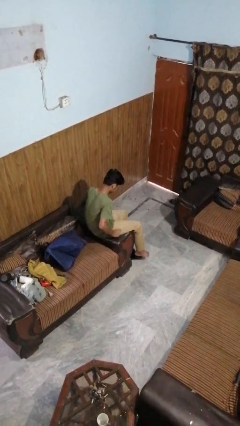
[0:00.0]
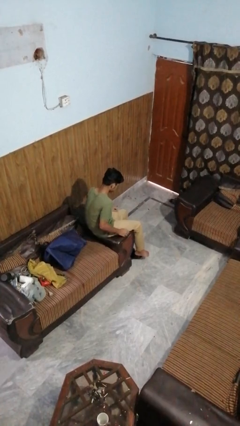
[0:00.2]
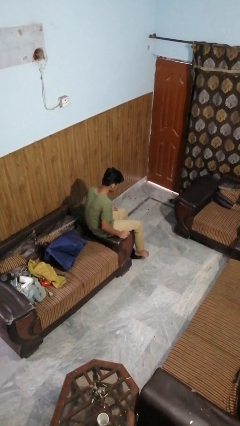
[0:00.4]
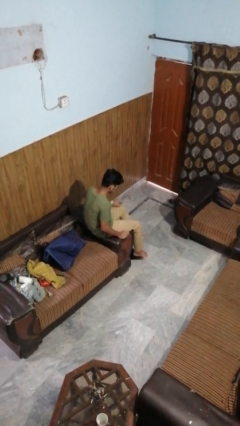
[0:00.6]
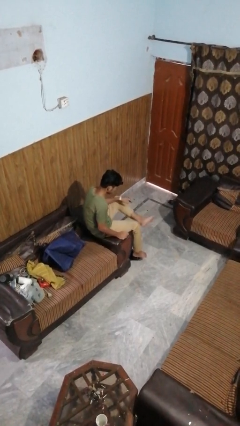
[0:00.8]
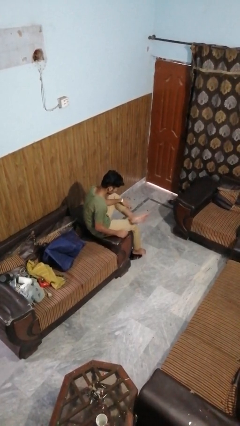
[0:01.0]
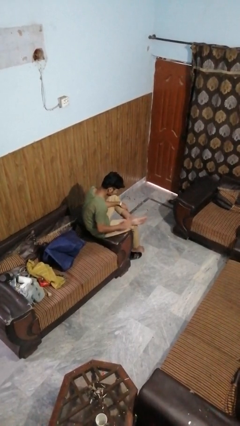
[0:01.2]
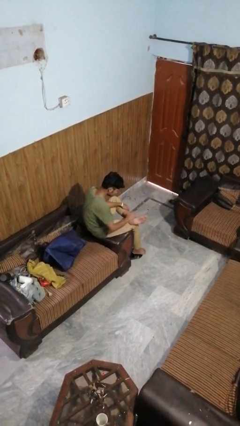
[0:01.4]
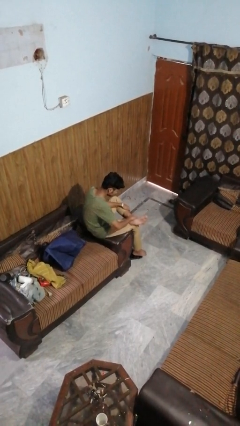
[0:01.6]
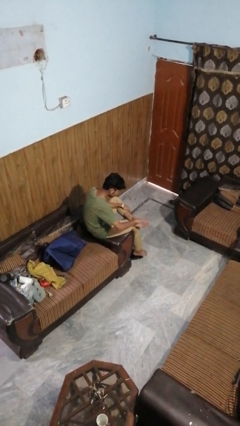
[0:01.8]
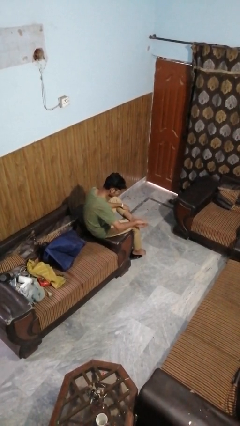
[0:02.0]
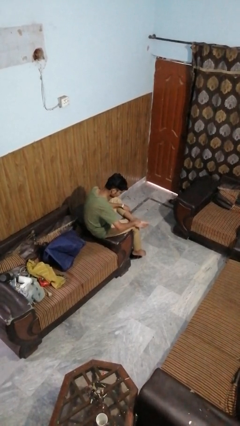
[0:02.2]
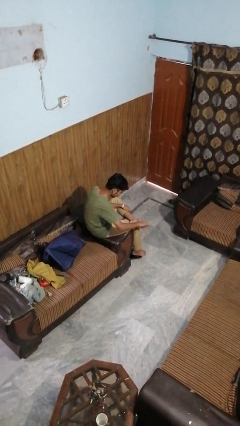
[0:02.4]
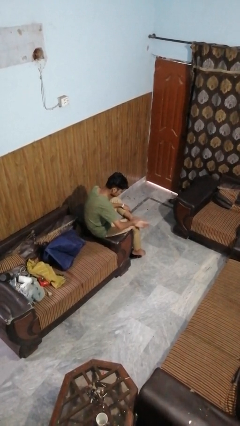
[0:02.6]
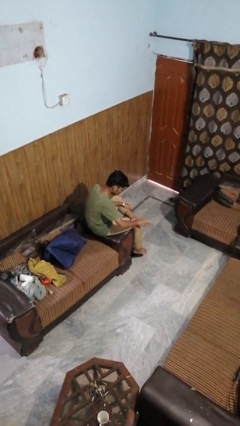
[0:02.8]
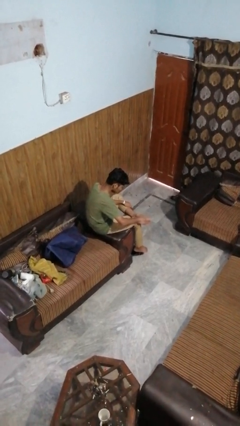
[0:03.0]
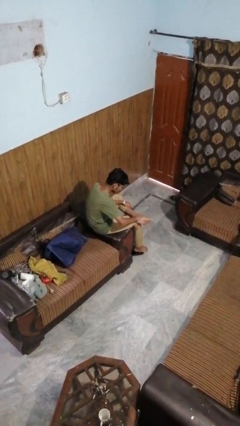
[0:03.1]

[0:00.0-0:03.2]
person rubs foot

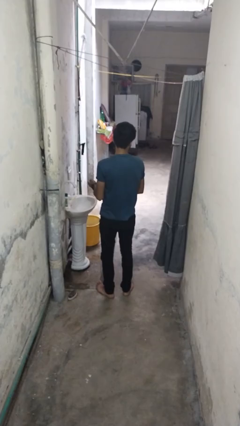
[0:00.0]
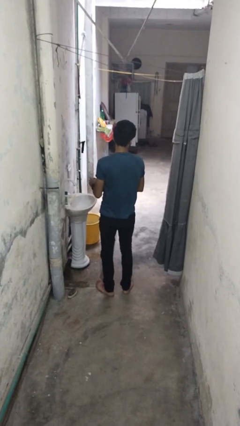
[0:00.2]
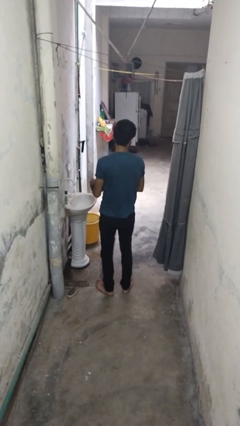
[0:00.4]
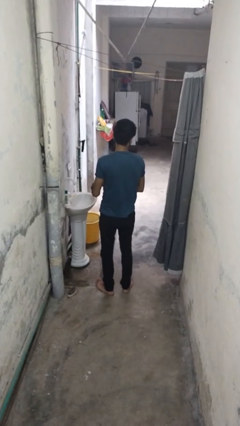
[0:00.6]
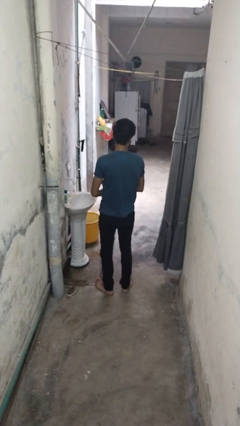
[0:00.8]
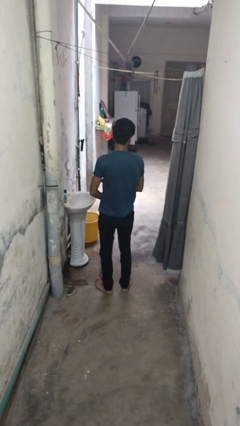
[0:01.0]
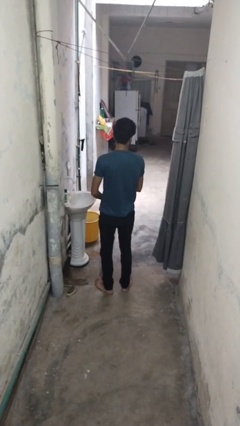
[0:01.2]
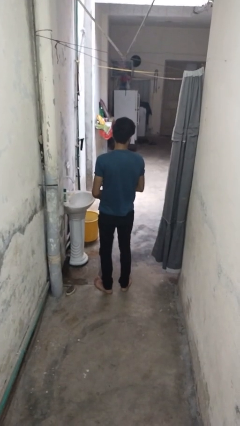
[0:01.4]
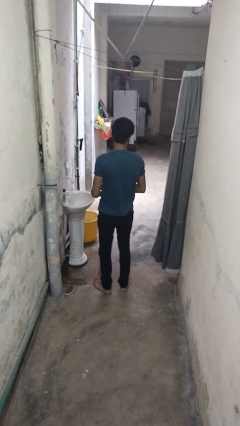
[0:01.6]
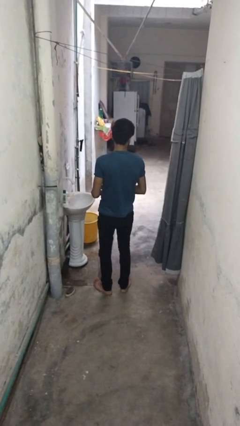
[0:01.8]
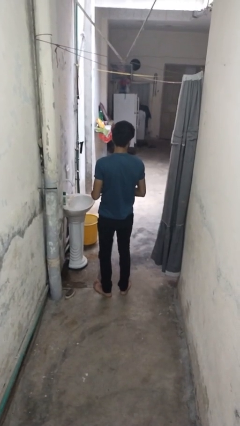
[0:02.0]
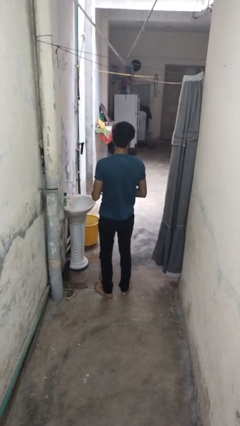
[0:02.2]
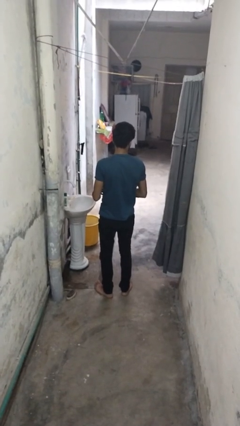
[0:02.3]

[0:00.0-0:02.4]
person takes off wristwatch

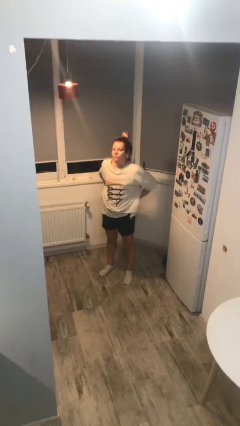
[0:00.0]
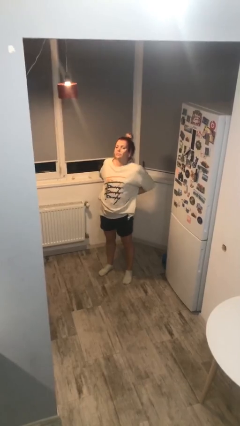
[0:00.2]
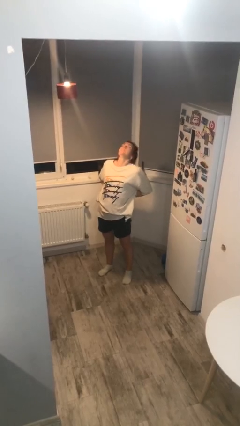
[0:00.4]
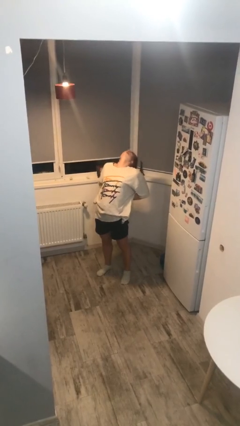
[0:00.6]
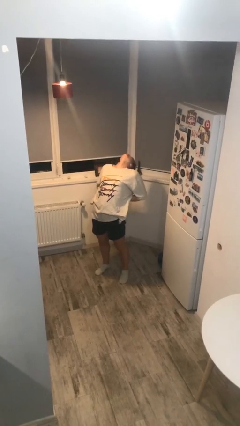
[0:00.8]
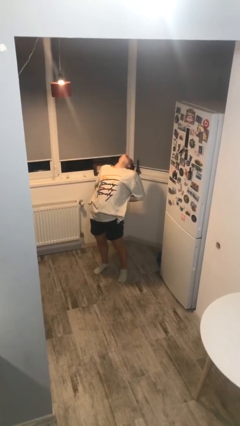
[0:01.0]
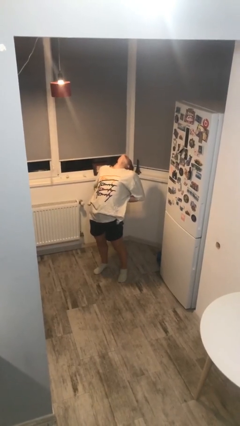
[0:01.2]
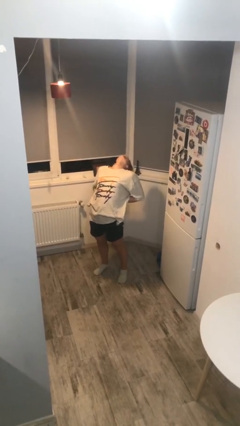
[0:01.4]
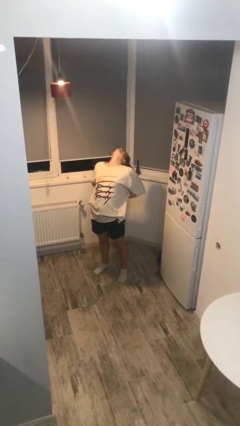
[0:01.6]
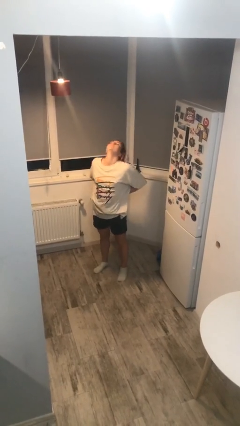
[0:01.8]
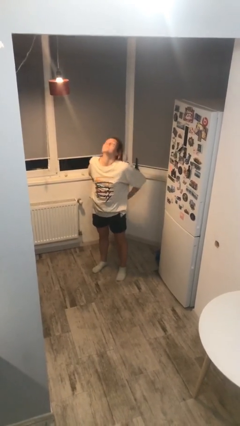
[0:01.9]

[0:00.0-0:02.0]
person stretches back

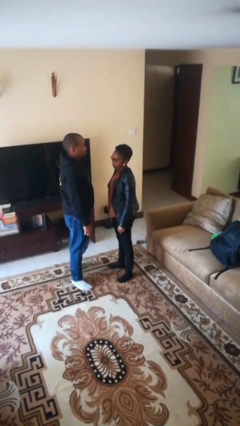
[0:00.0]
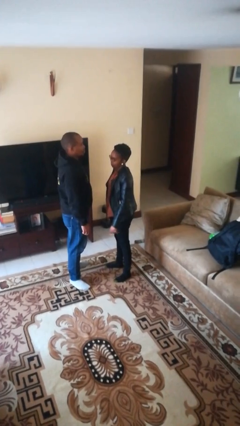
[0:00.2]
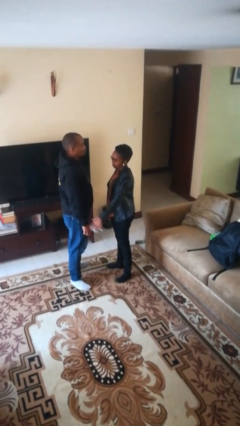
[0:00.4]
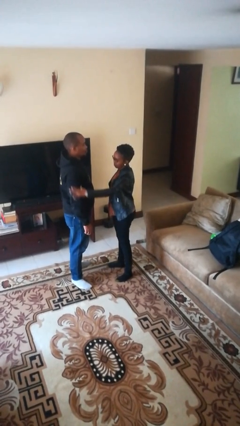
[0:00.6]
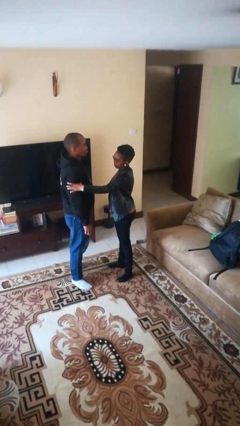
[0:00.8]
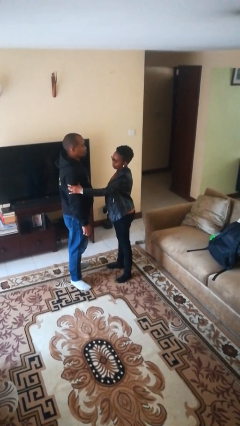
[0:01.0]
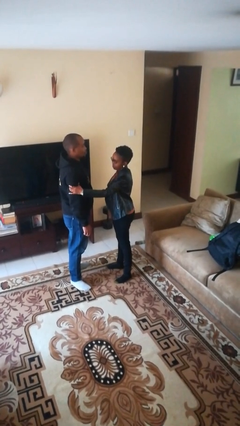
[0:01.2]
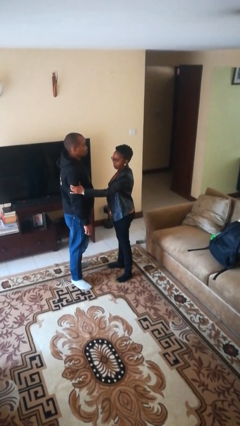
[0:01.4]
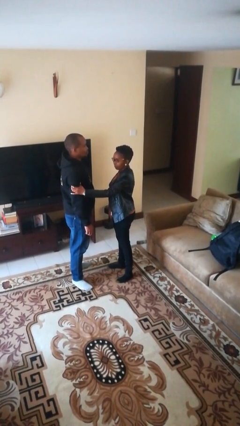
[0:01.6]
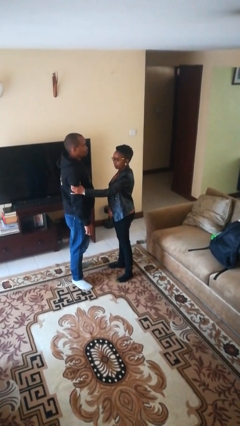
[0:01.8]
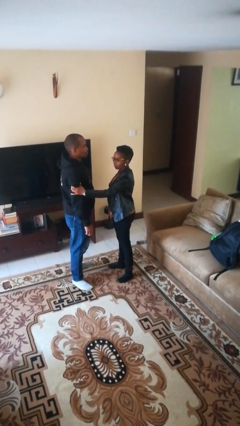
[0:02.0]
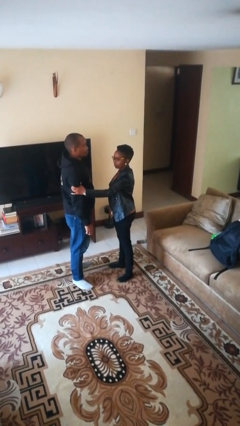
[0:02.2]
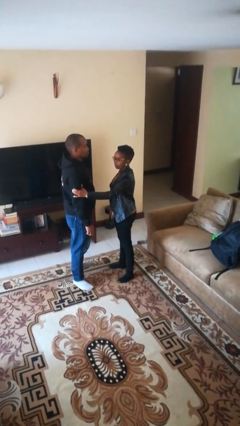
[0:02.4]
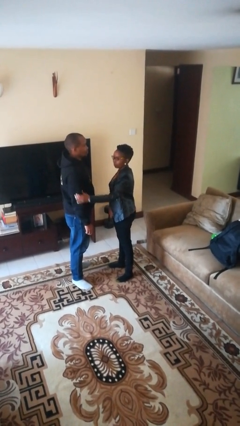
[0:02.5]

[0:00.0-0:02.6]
person grabs person by bicep

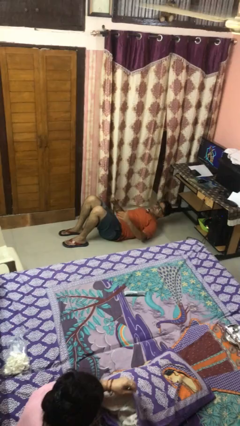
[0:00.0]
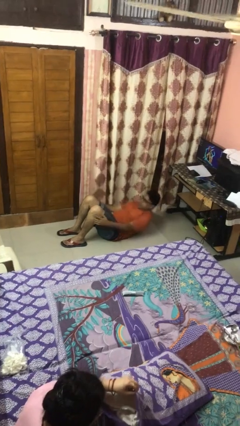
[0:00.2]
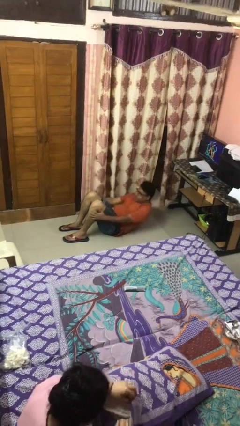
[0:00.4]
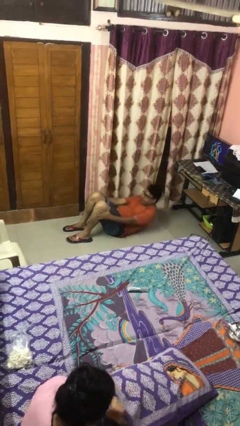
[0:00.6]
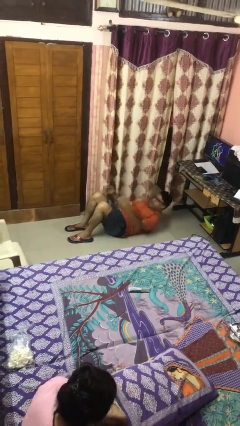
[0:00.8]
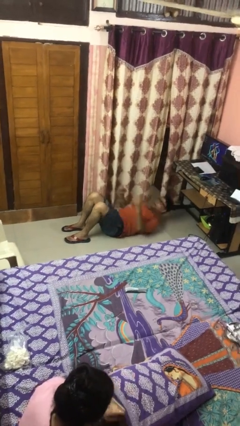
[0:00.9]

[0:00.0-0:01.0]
person exercises with situp

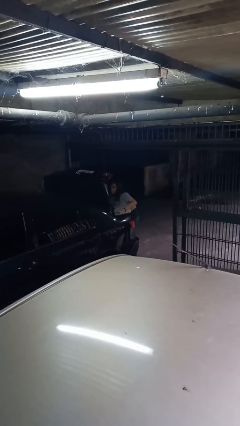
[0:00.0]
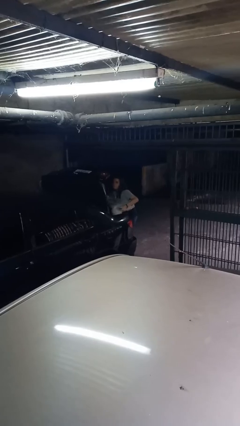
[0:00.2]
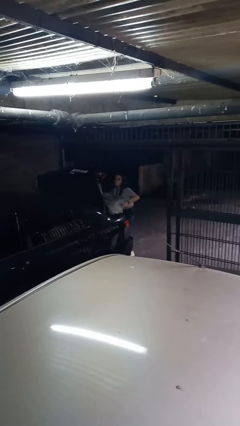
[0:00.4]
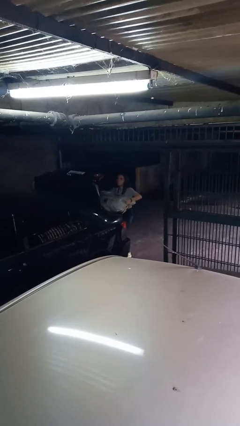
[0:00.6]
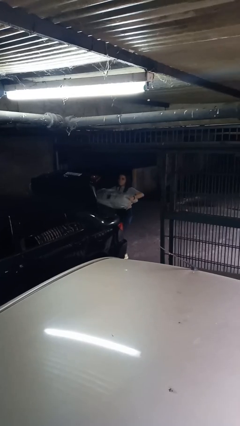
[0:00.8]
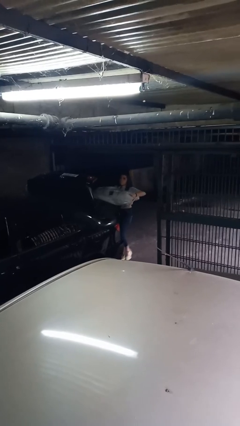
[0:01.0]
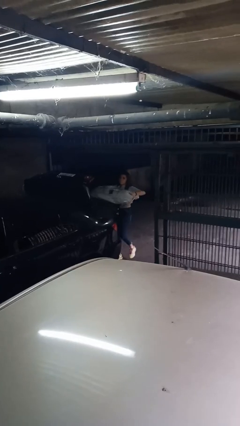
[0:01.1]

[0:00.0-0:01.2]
person unloads car

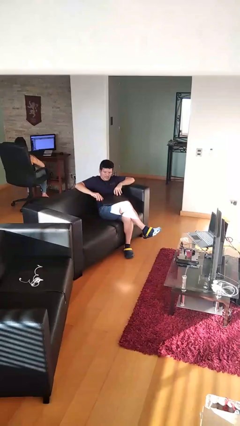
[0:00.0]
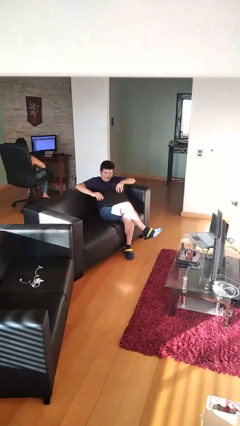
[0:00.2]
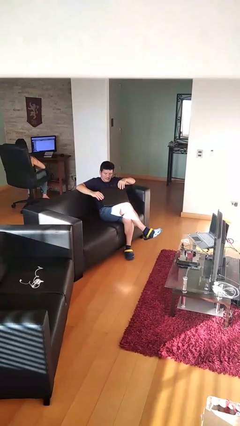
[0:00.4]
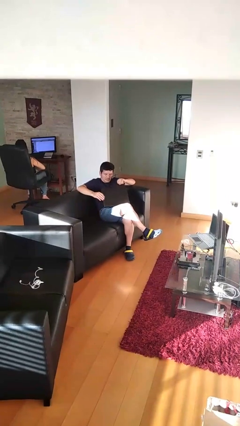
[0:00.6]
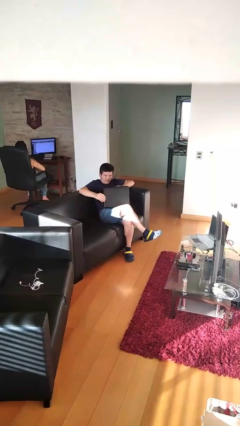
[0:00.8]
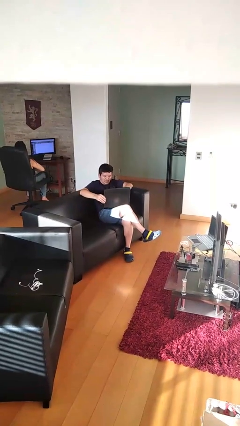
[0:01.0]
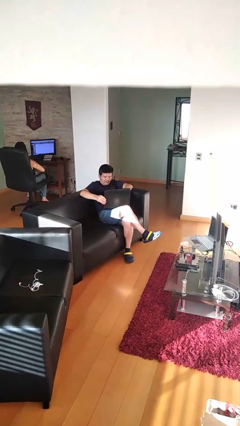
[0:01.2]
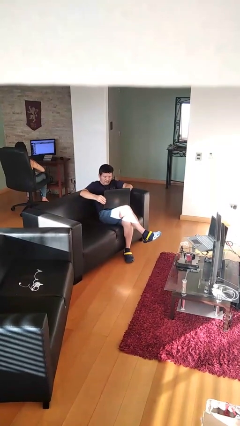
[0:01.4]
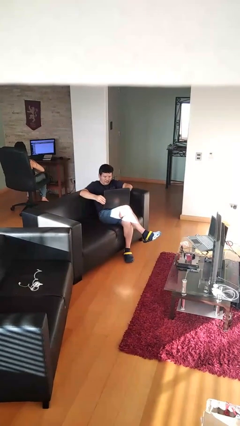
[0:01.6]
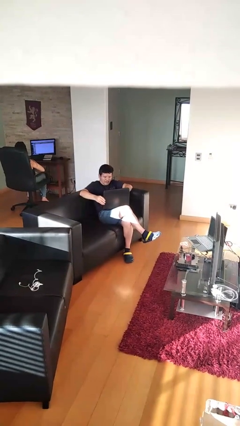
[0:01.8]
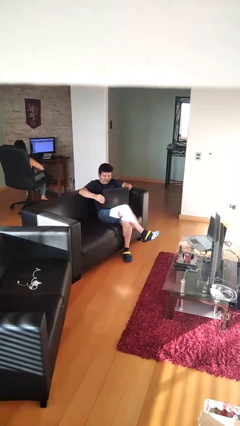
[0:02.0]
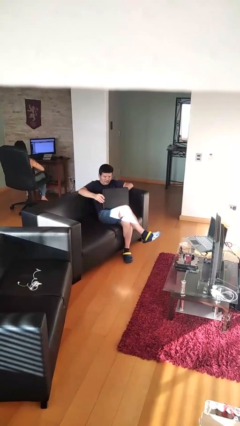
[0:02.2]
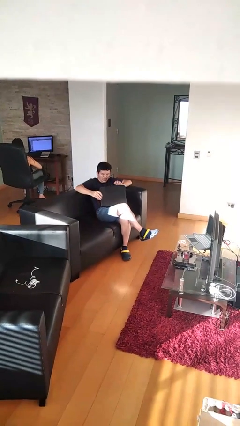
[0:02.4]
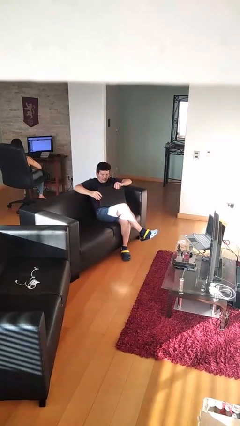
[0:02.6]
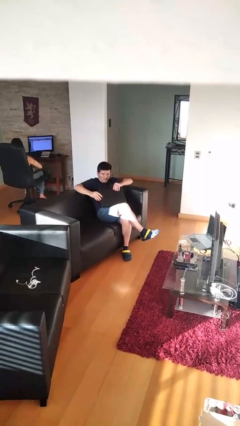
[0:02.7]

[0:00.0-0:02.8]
person interacts with laptop

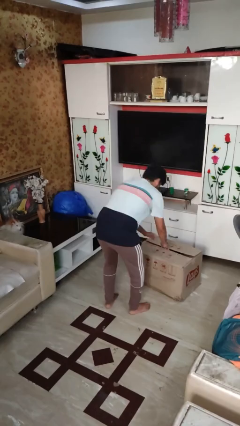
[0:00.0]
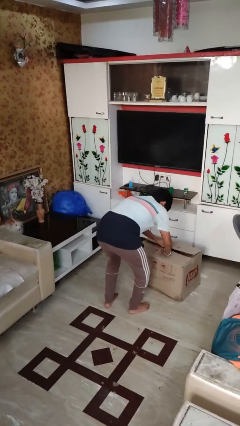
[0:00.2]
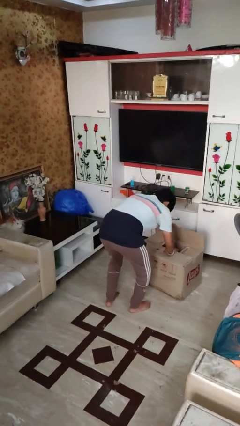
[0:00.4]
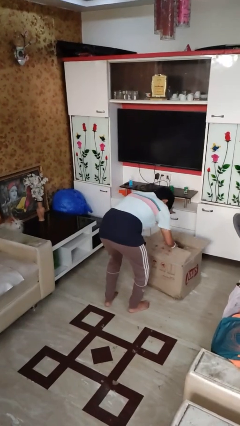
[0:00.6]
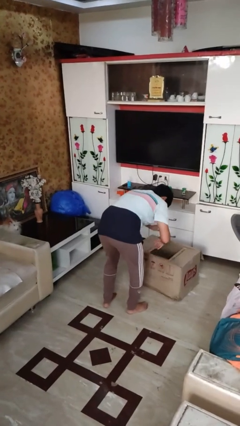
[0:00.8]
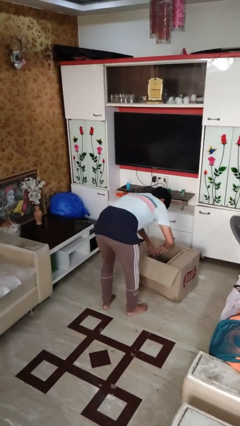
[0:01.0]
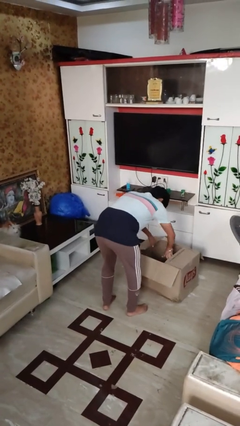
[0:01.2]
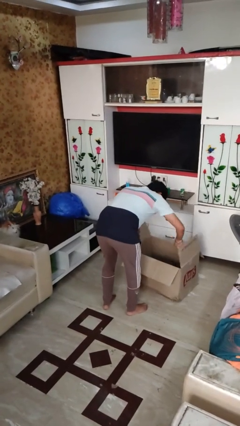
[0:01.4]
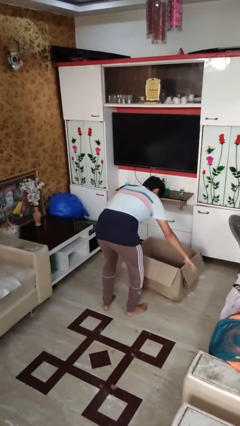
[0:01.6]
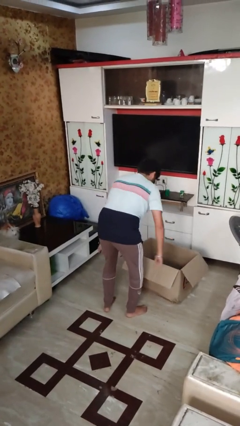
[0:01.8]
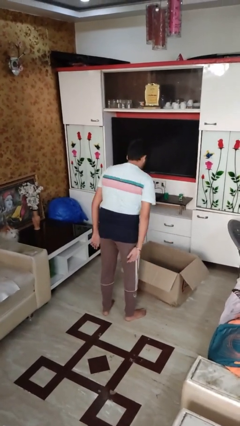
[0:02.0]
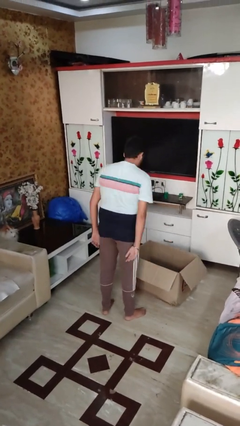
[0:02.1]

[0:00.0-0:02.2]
person opens box
